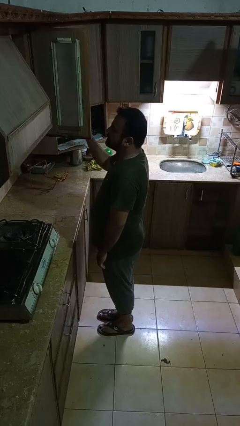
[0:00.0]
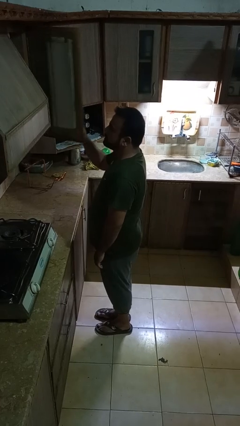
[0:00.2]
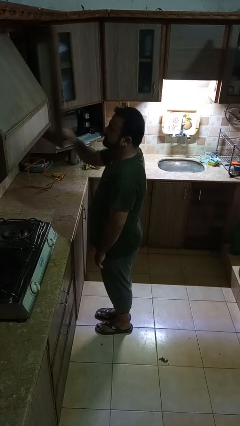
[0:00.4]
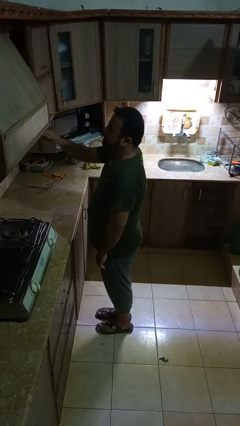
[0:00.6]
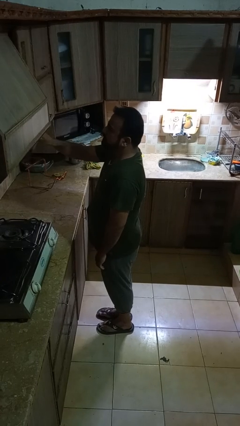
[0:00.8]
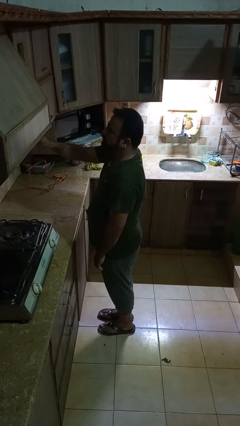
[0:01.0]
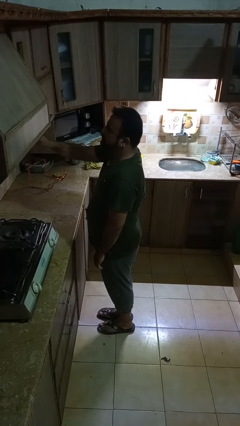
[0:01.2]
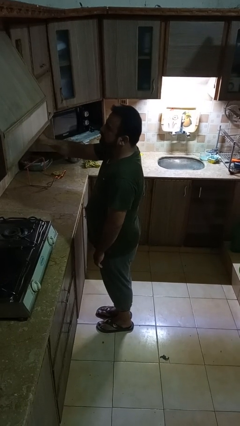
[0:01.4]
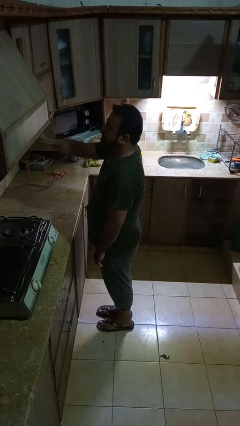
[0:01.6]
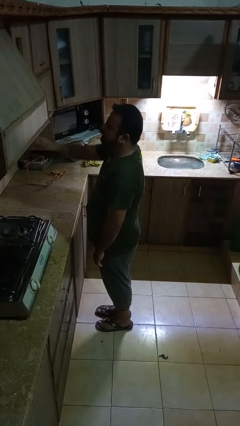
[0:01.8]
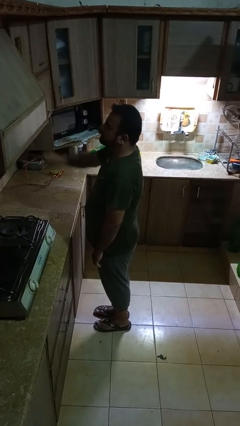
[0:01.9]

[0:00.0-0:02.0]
person closes cabinet

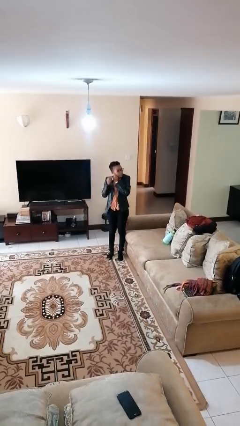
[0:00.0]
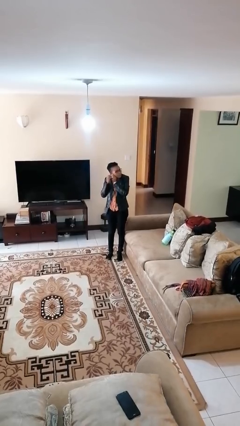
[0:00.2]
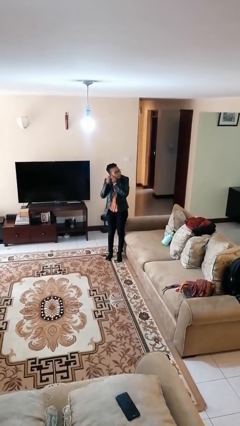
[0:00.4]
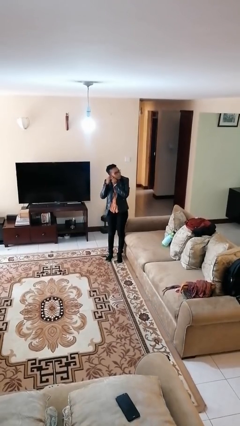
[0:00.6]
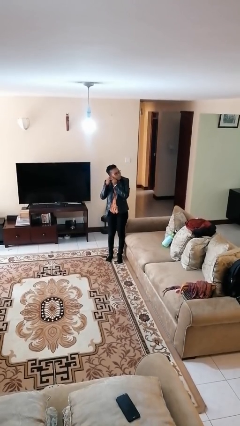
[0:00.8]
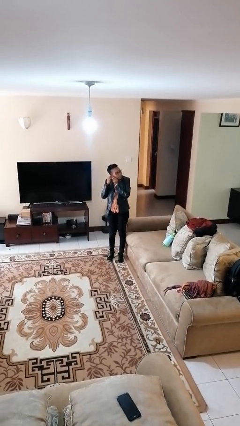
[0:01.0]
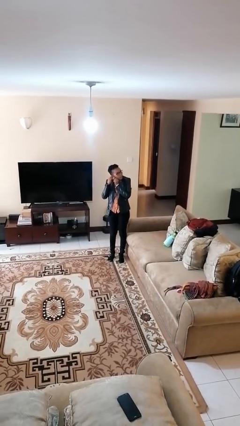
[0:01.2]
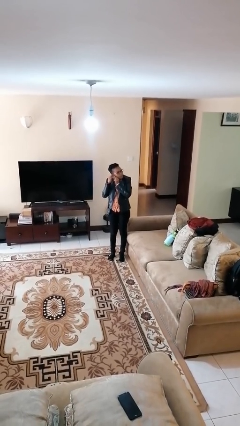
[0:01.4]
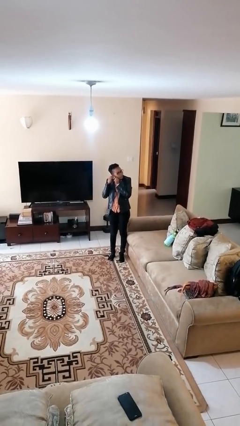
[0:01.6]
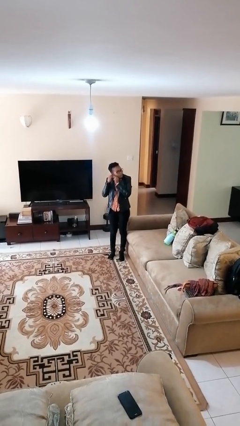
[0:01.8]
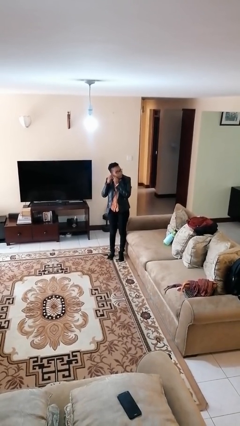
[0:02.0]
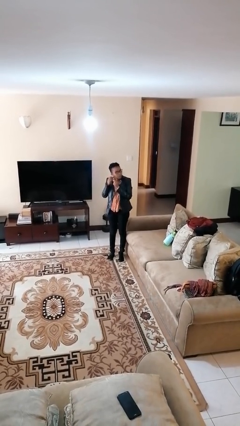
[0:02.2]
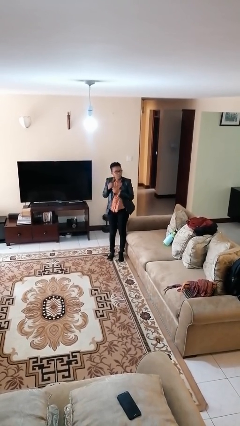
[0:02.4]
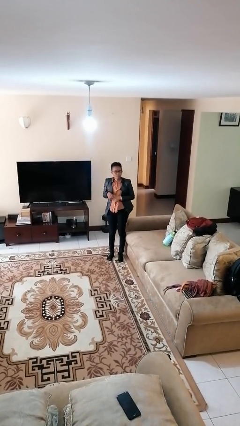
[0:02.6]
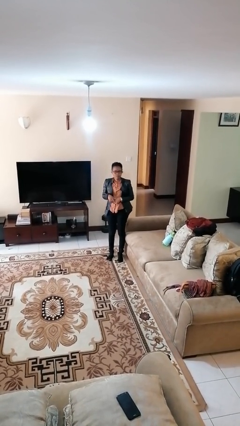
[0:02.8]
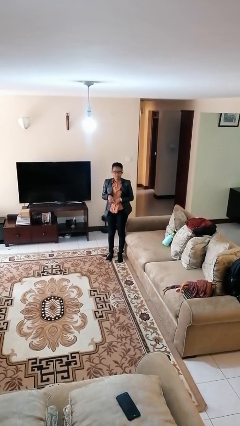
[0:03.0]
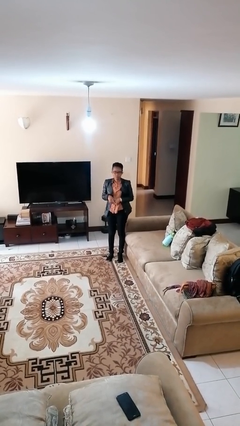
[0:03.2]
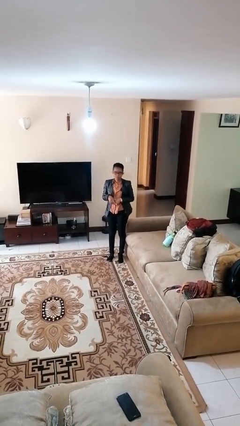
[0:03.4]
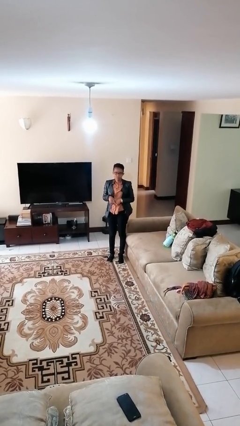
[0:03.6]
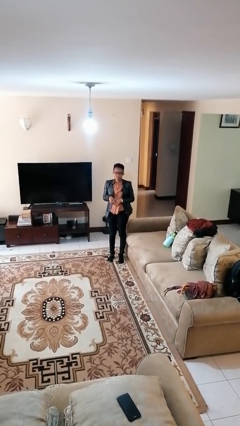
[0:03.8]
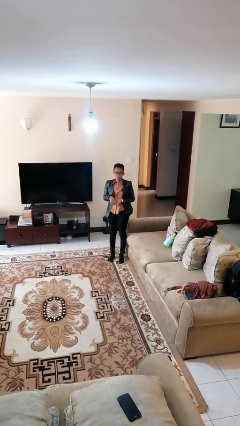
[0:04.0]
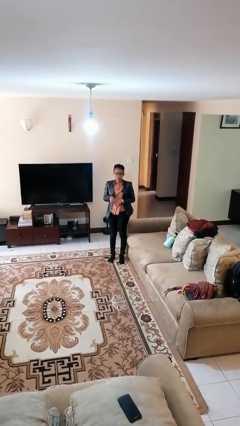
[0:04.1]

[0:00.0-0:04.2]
person puts on earrings

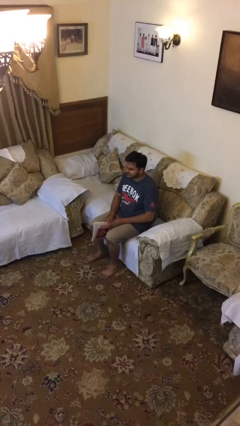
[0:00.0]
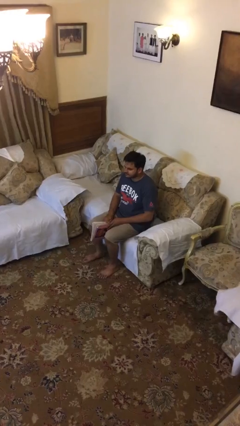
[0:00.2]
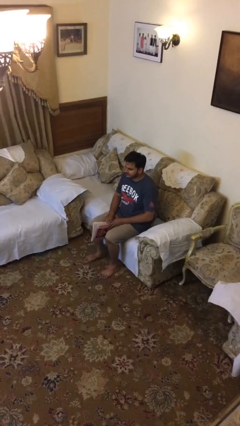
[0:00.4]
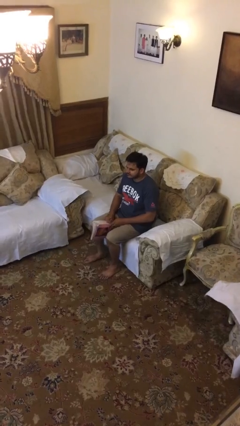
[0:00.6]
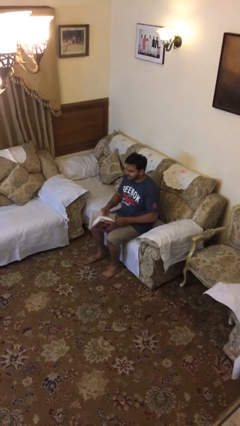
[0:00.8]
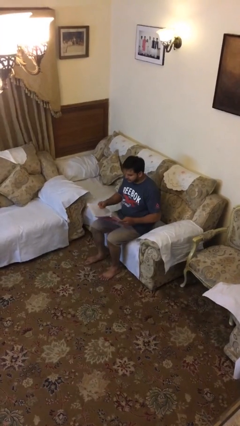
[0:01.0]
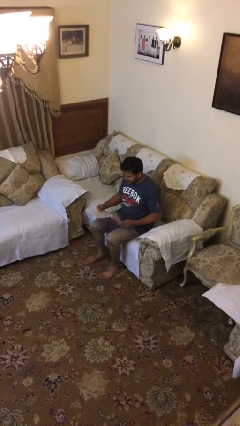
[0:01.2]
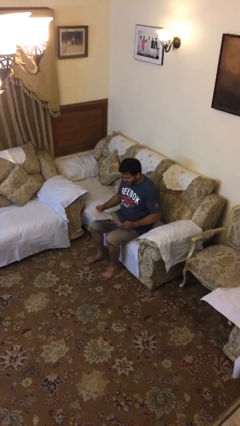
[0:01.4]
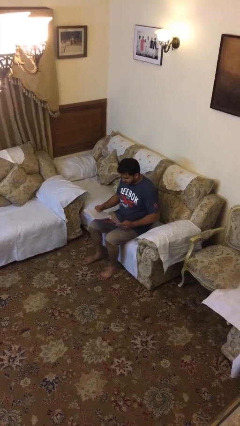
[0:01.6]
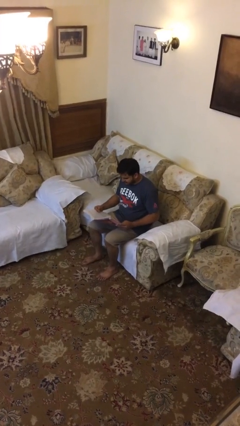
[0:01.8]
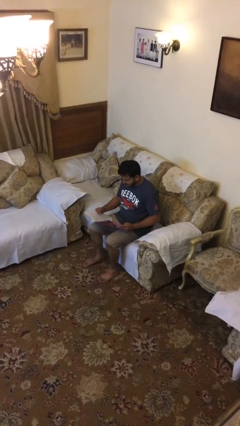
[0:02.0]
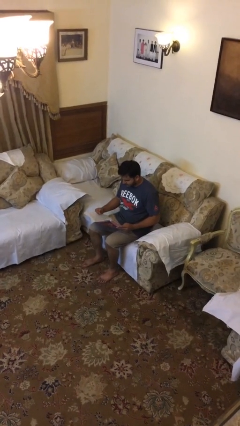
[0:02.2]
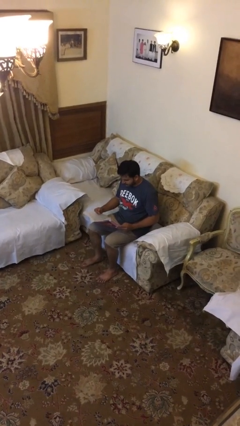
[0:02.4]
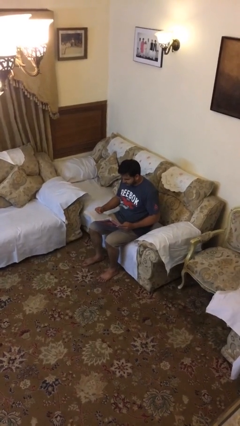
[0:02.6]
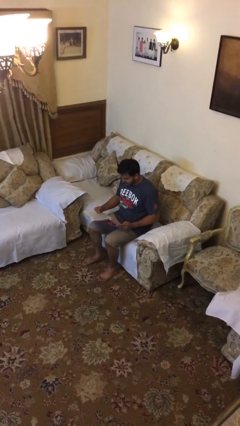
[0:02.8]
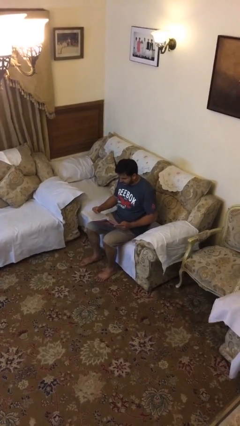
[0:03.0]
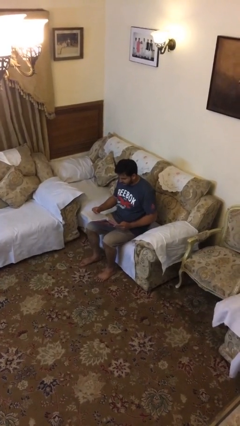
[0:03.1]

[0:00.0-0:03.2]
person reads document

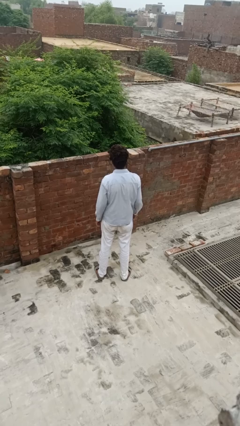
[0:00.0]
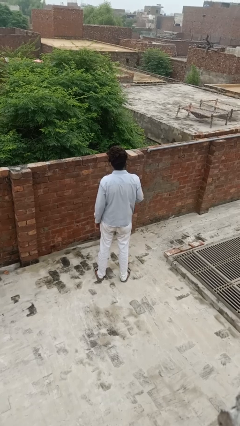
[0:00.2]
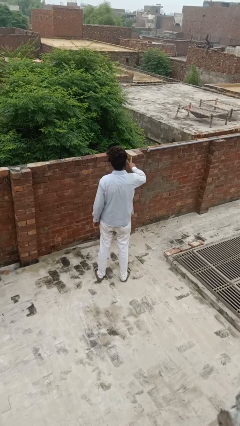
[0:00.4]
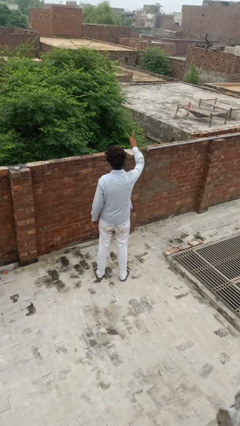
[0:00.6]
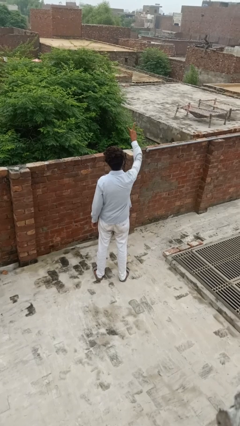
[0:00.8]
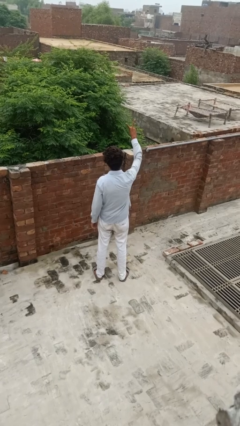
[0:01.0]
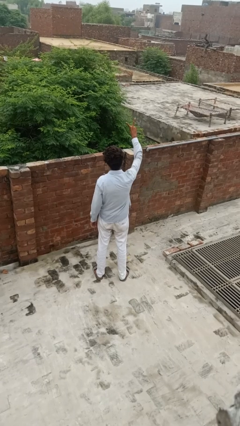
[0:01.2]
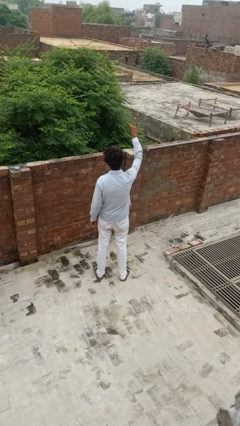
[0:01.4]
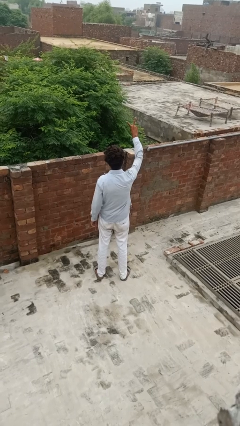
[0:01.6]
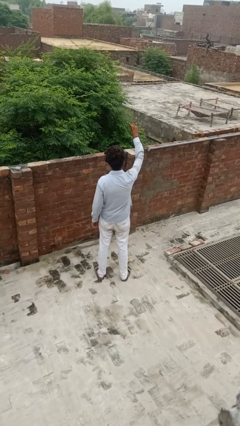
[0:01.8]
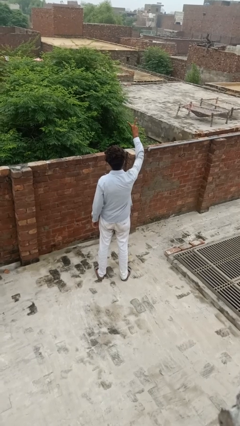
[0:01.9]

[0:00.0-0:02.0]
person gestures peace

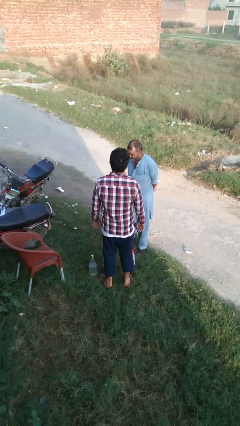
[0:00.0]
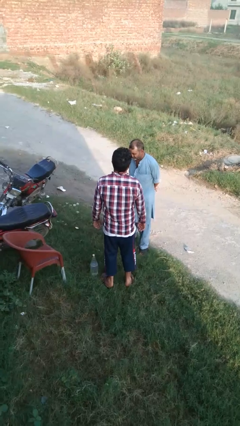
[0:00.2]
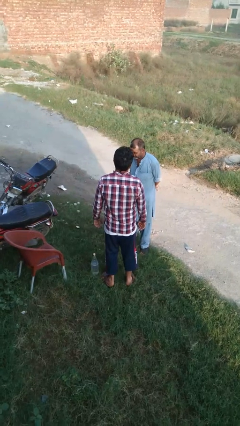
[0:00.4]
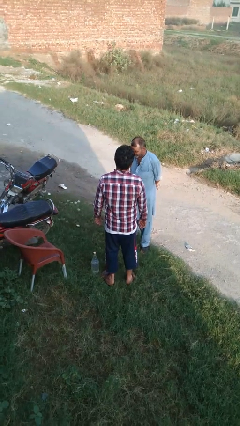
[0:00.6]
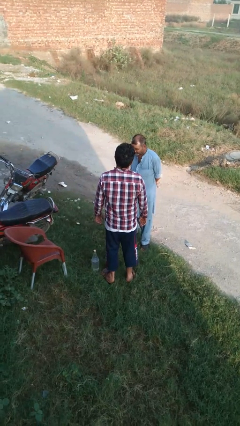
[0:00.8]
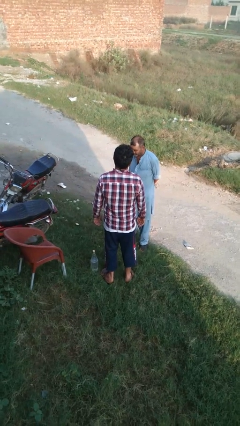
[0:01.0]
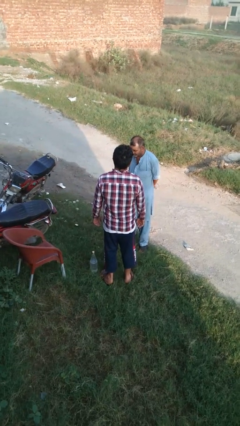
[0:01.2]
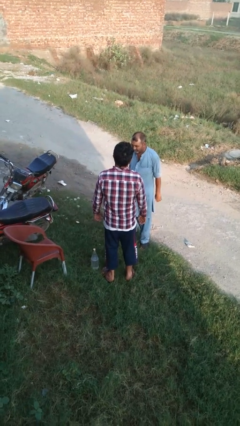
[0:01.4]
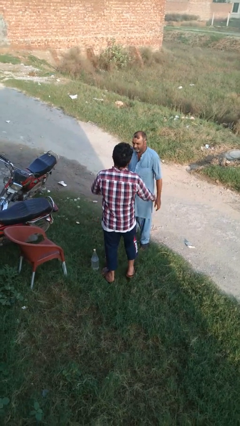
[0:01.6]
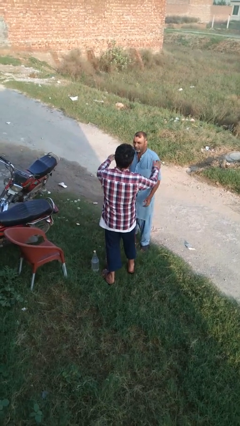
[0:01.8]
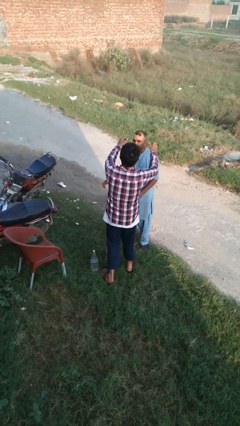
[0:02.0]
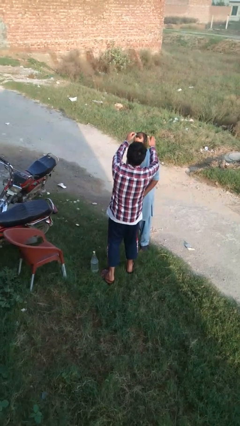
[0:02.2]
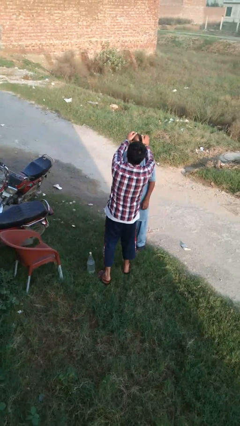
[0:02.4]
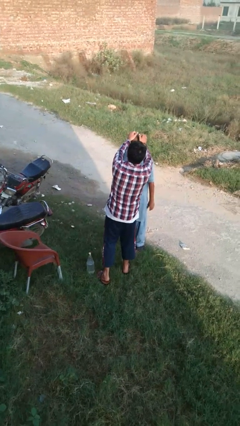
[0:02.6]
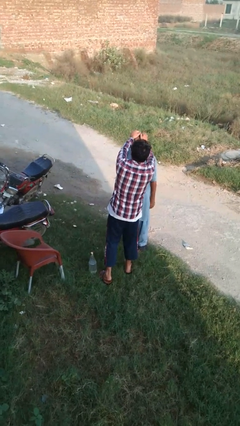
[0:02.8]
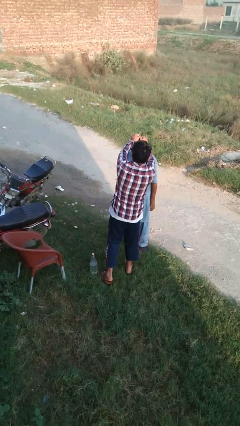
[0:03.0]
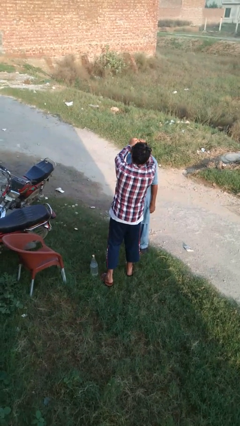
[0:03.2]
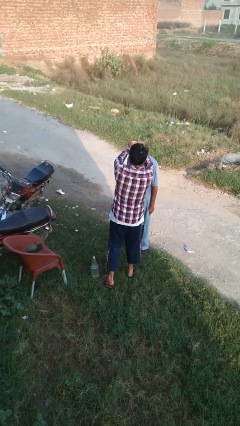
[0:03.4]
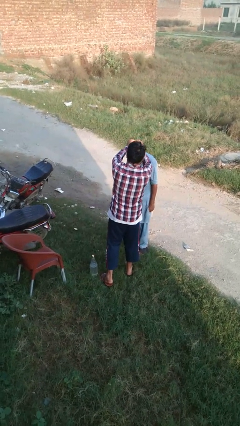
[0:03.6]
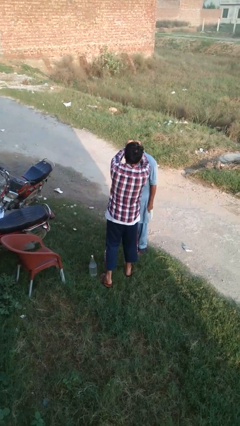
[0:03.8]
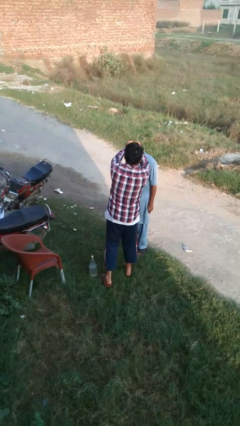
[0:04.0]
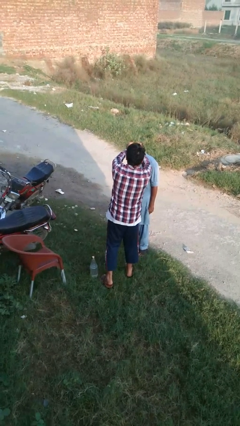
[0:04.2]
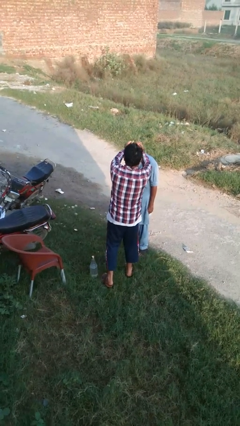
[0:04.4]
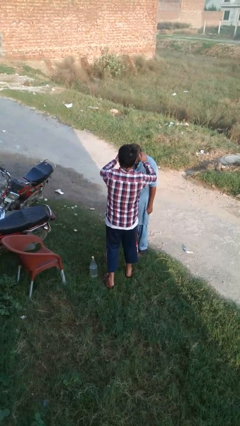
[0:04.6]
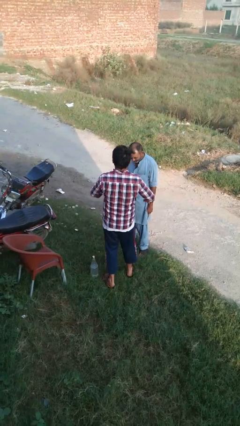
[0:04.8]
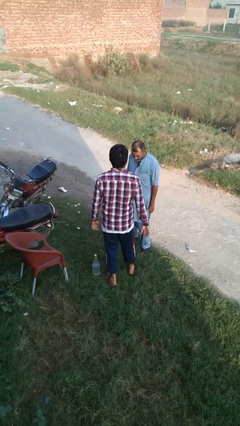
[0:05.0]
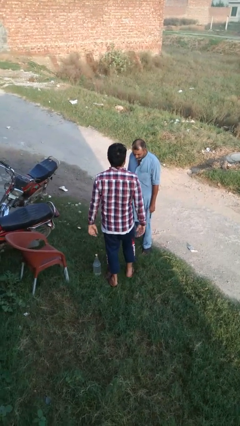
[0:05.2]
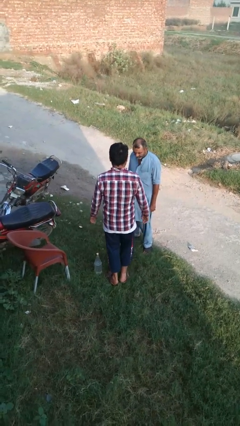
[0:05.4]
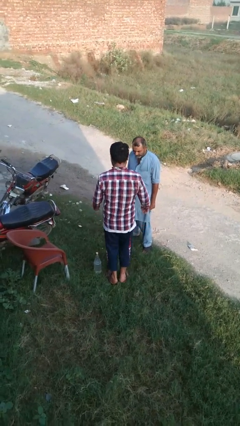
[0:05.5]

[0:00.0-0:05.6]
person grabs person by hair

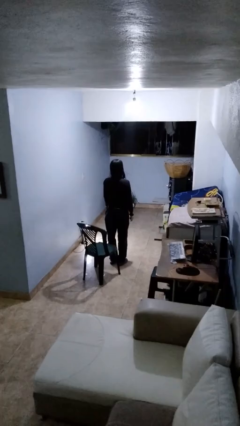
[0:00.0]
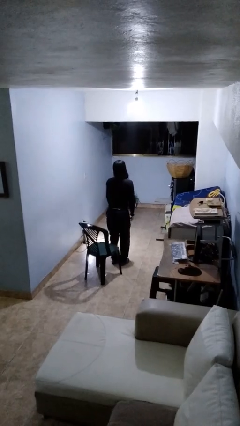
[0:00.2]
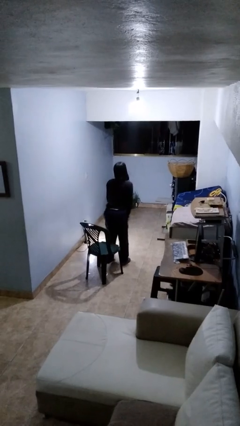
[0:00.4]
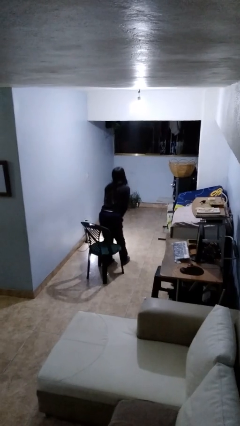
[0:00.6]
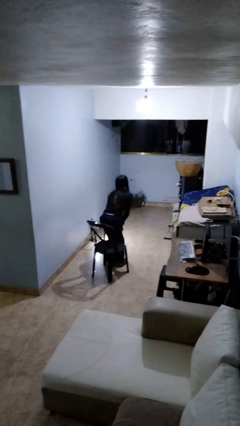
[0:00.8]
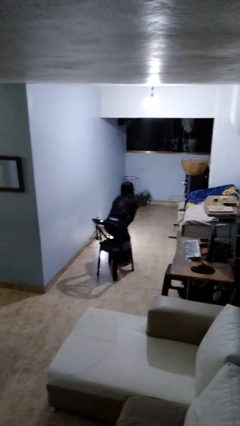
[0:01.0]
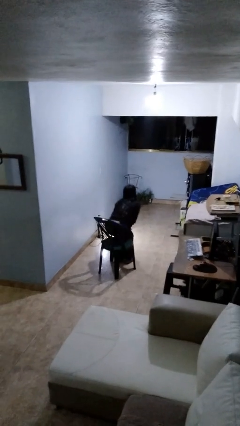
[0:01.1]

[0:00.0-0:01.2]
person sits down
